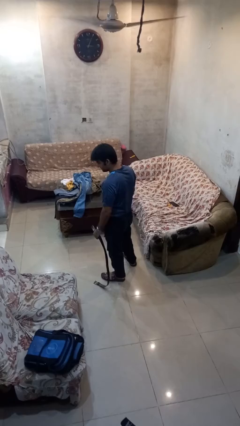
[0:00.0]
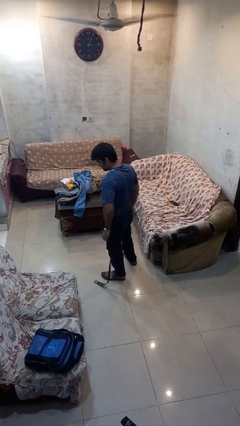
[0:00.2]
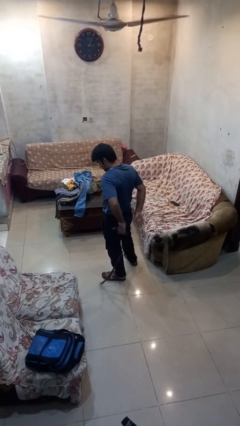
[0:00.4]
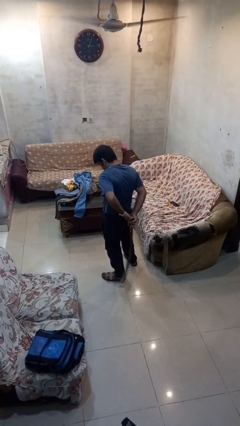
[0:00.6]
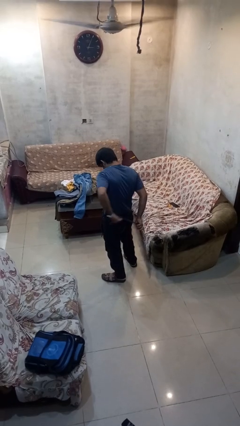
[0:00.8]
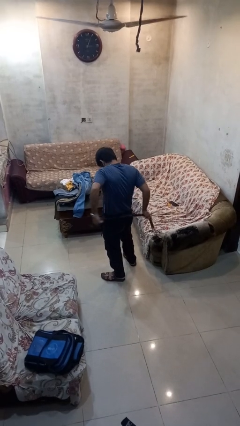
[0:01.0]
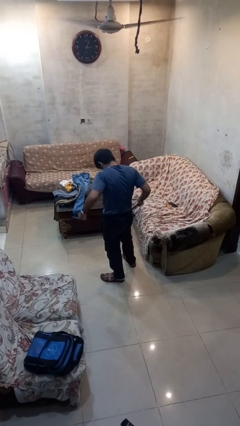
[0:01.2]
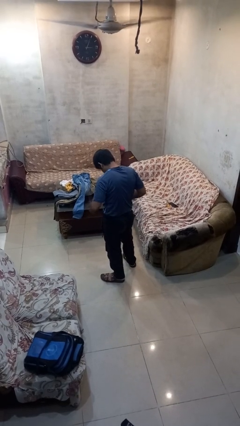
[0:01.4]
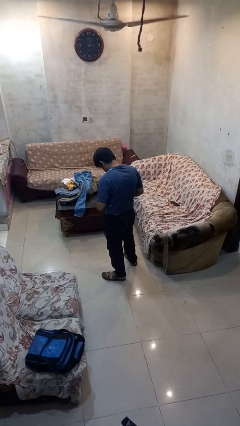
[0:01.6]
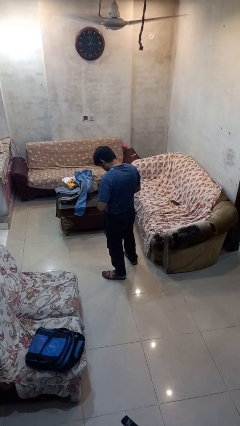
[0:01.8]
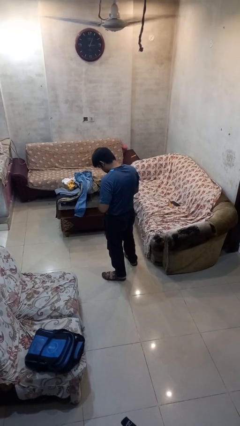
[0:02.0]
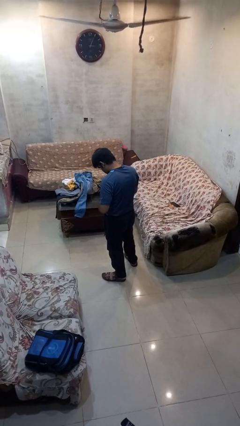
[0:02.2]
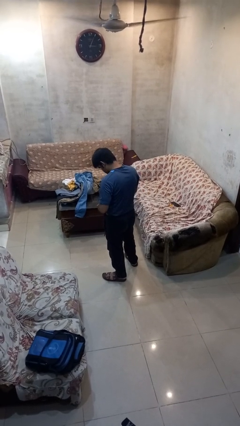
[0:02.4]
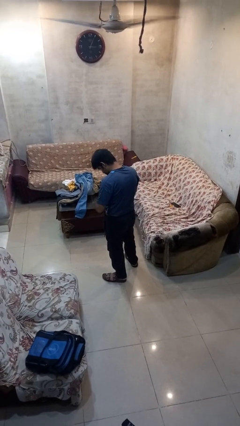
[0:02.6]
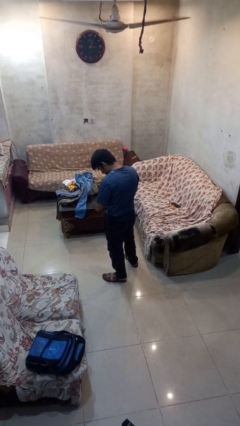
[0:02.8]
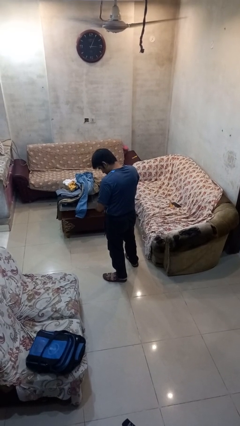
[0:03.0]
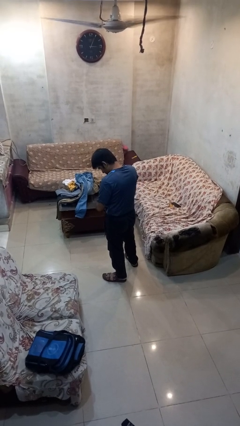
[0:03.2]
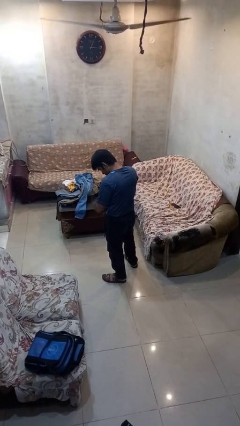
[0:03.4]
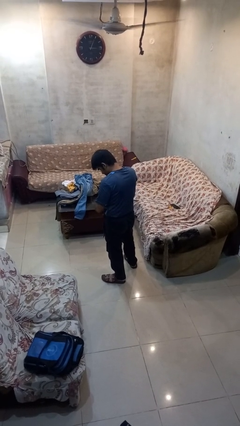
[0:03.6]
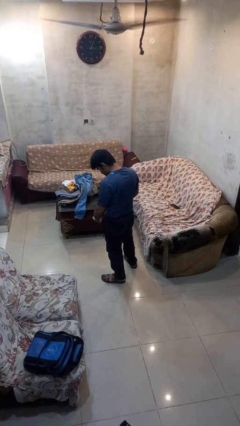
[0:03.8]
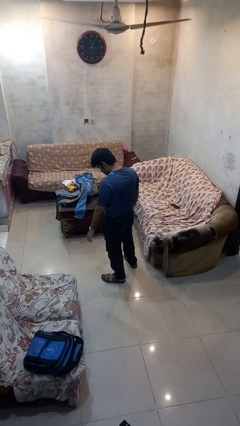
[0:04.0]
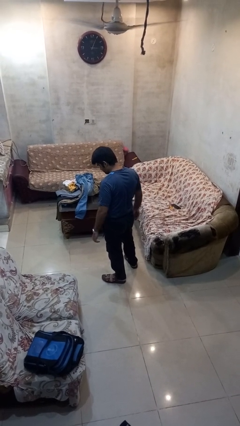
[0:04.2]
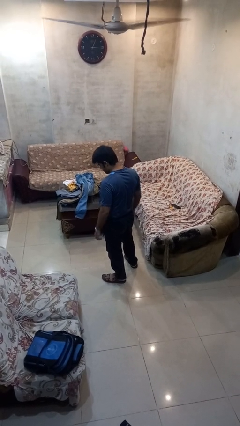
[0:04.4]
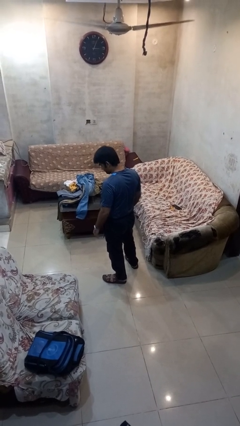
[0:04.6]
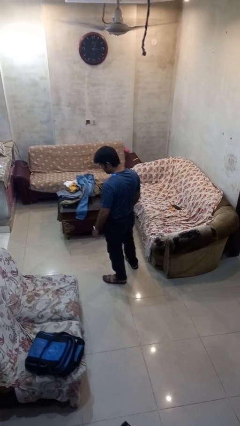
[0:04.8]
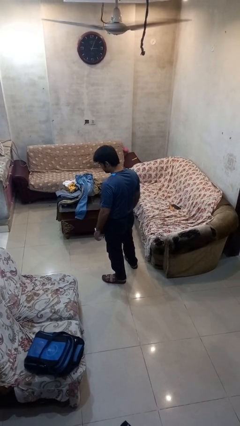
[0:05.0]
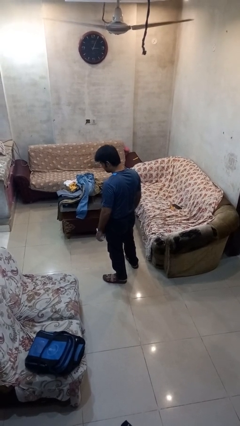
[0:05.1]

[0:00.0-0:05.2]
person puts on belt

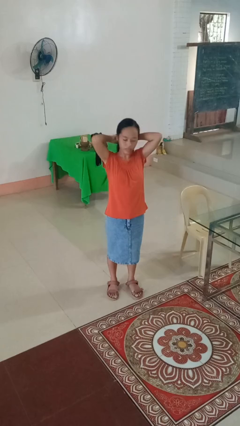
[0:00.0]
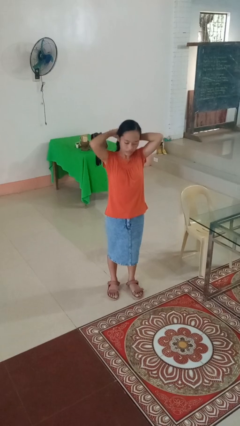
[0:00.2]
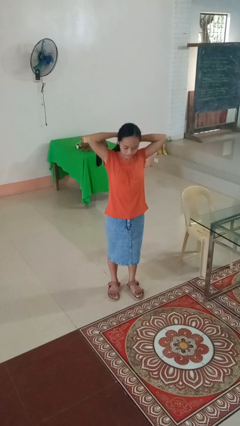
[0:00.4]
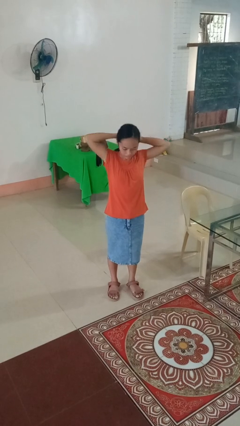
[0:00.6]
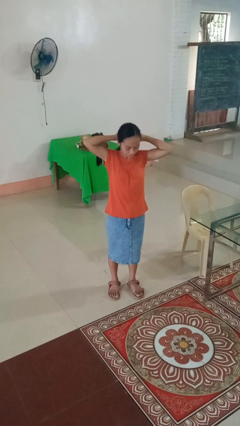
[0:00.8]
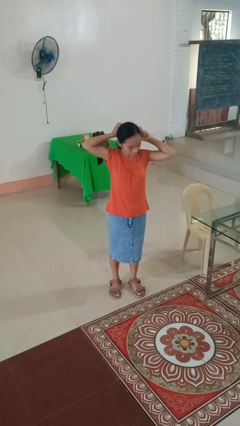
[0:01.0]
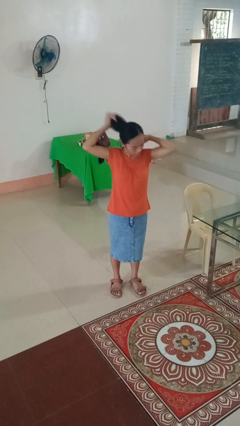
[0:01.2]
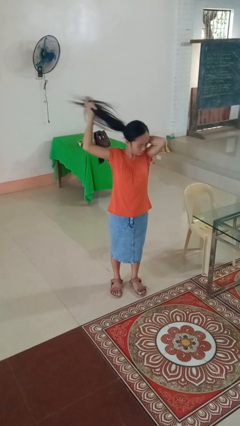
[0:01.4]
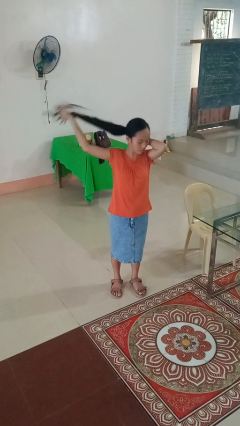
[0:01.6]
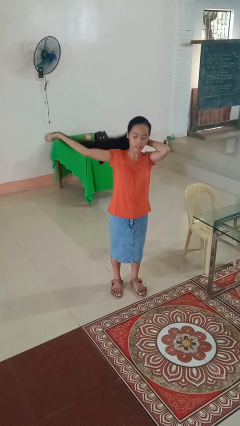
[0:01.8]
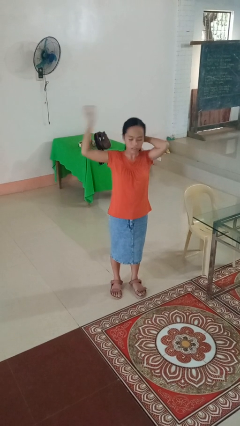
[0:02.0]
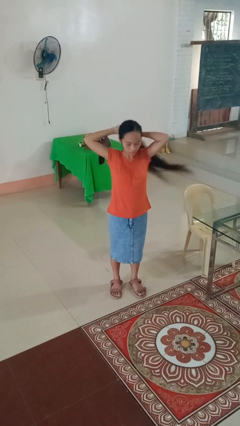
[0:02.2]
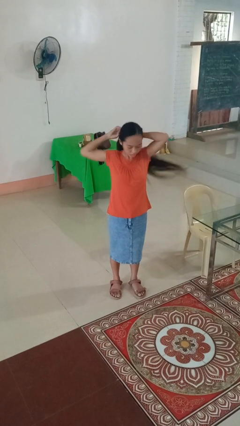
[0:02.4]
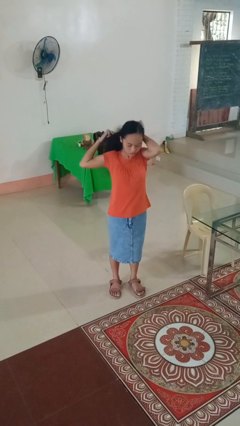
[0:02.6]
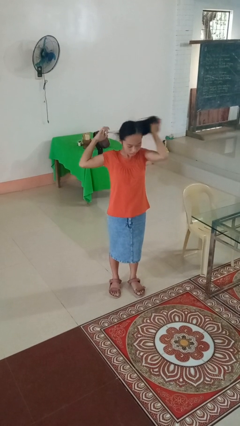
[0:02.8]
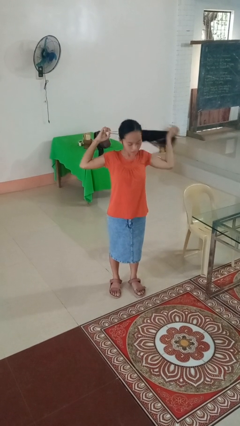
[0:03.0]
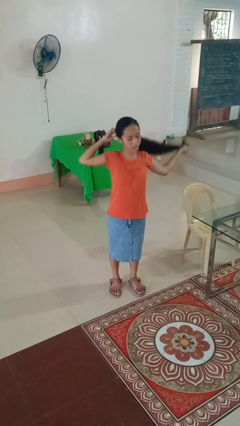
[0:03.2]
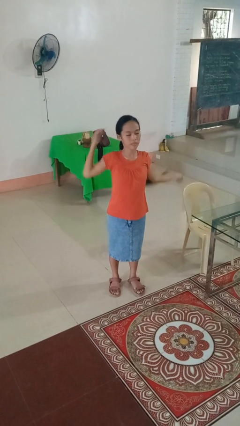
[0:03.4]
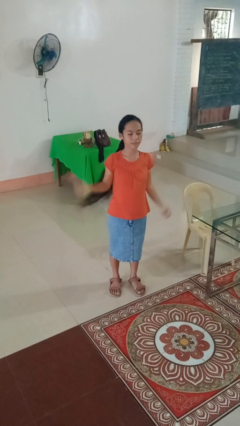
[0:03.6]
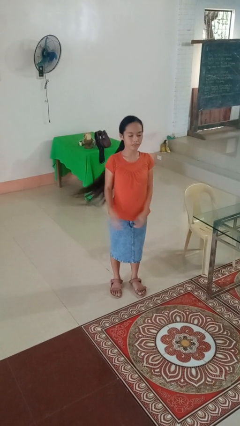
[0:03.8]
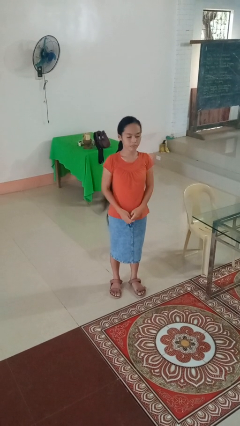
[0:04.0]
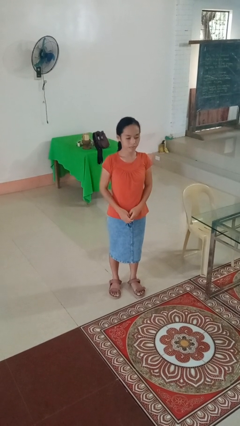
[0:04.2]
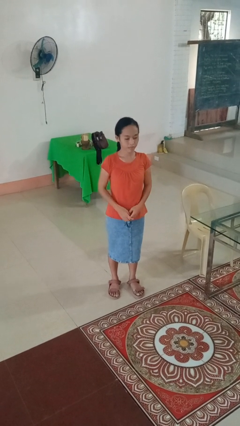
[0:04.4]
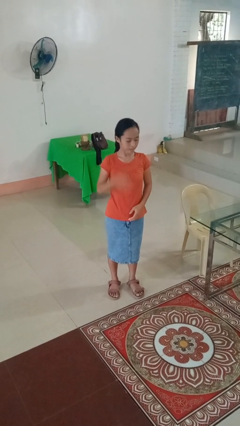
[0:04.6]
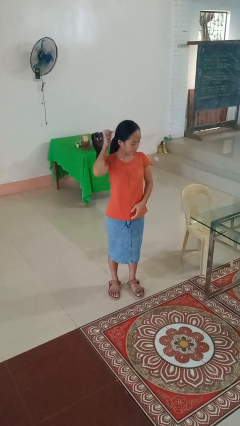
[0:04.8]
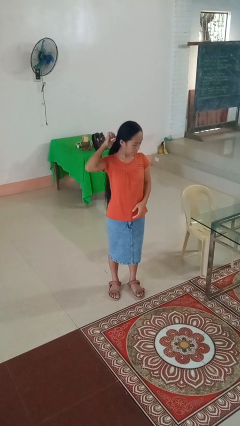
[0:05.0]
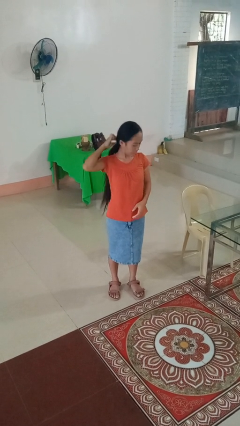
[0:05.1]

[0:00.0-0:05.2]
person puts hair in ponytail

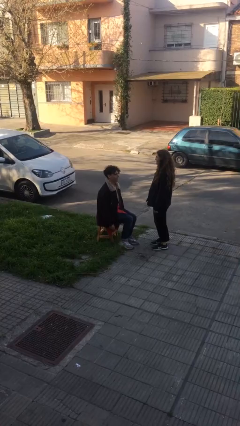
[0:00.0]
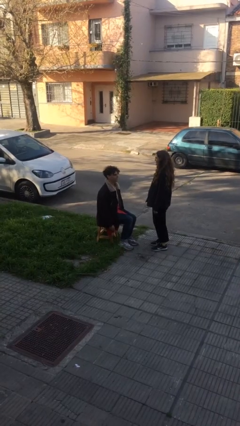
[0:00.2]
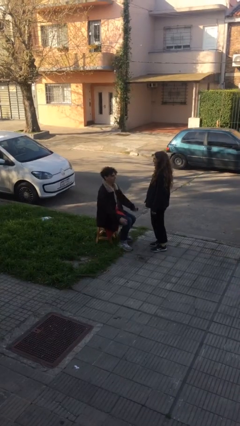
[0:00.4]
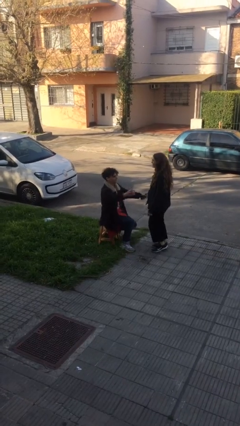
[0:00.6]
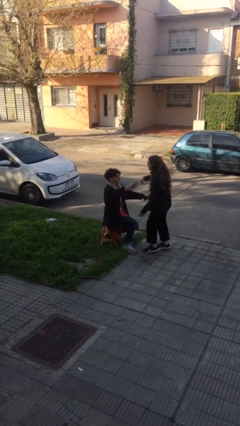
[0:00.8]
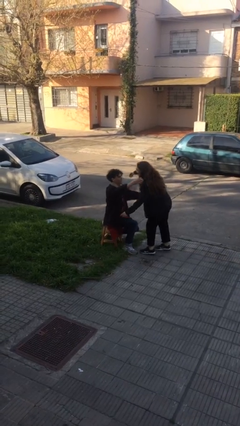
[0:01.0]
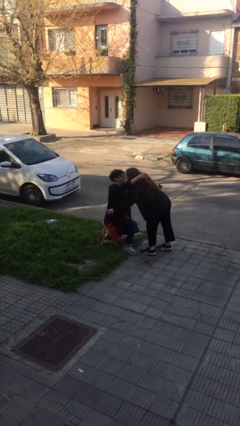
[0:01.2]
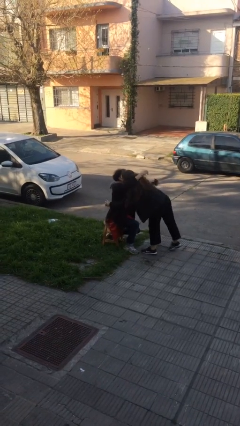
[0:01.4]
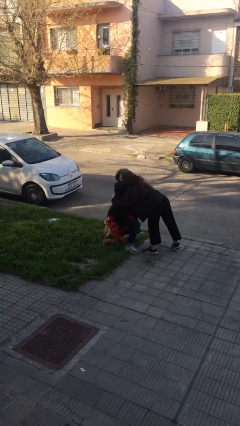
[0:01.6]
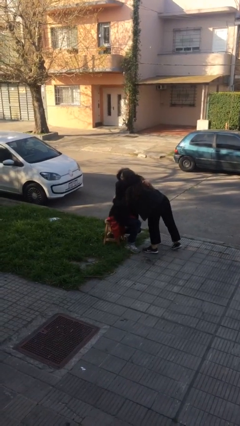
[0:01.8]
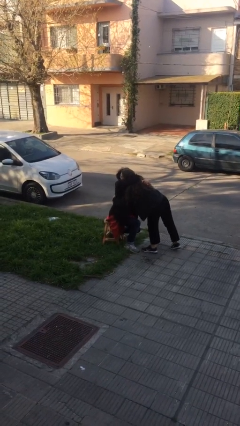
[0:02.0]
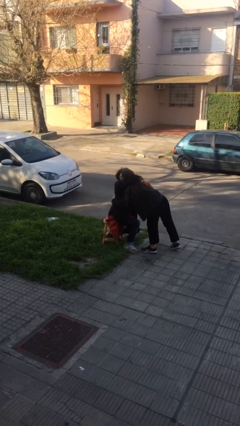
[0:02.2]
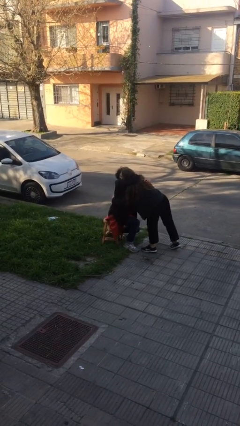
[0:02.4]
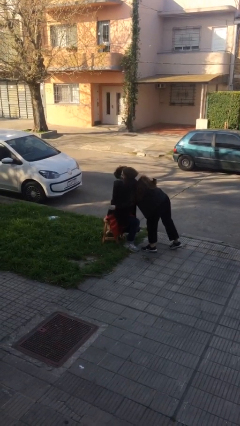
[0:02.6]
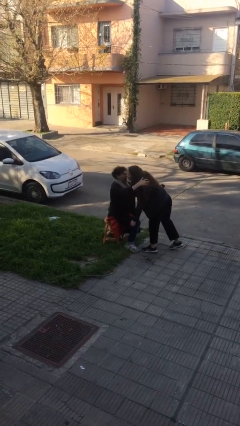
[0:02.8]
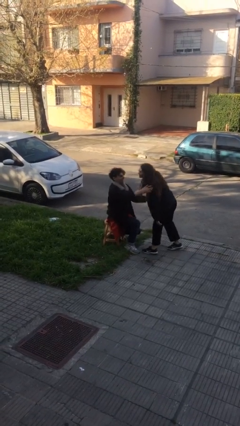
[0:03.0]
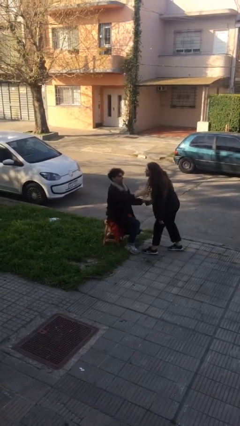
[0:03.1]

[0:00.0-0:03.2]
person embraces person

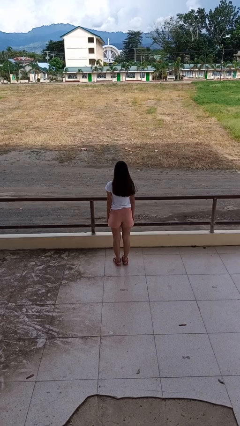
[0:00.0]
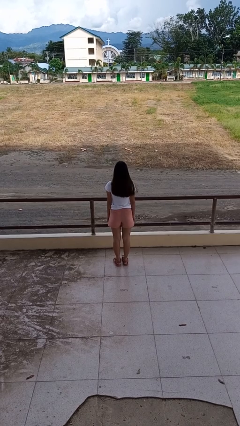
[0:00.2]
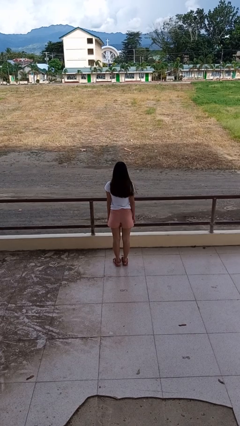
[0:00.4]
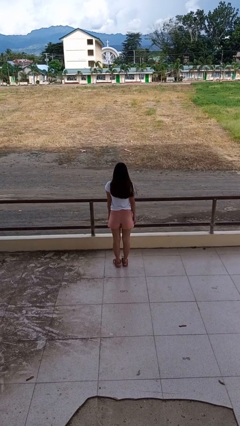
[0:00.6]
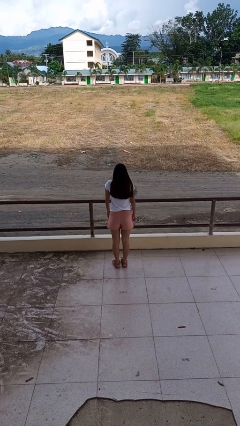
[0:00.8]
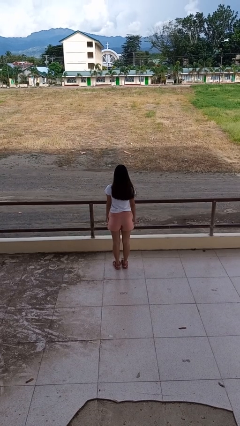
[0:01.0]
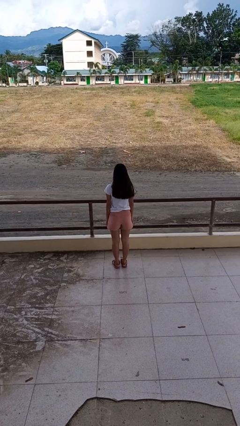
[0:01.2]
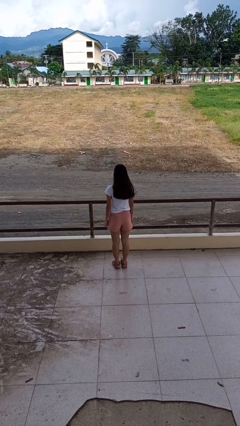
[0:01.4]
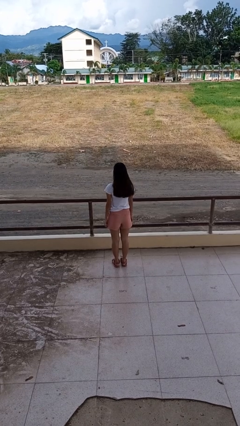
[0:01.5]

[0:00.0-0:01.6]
person shrugs

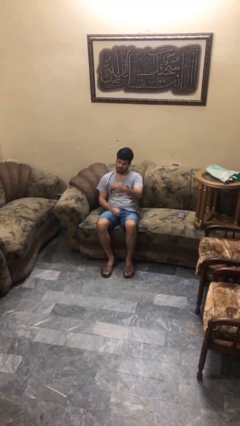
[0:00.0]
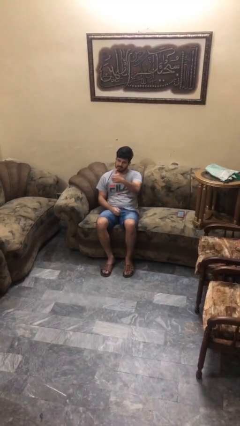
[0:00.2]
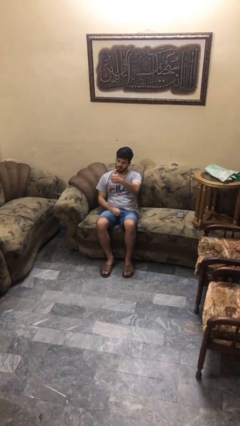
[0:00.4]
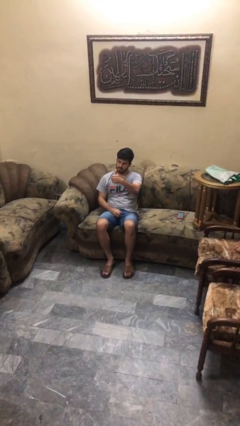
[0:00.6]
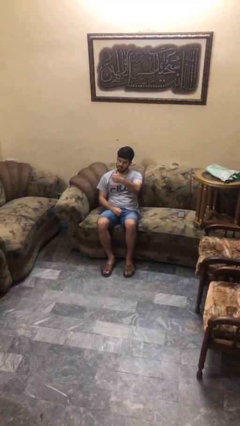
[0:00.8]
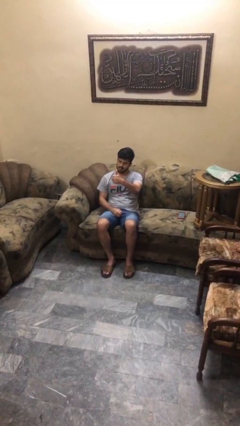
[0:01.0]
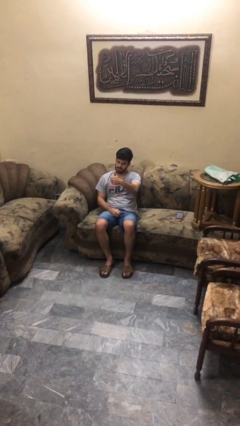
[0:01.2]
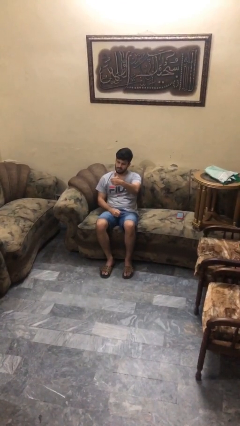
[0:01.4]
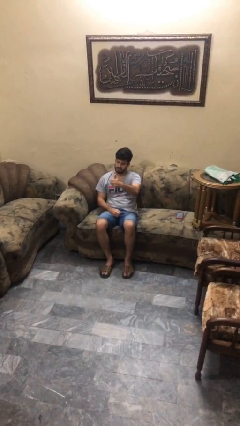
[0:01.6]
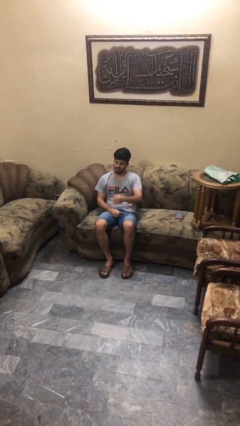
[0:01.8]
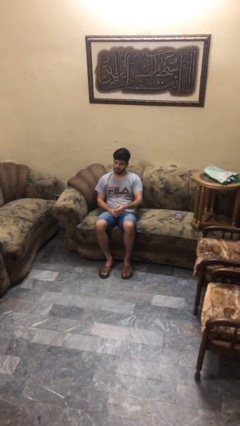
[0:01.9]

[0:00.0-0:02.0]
person gestures thumbs up
